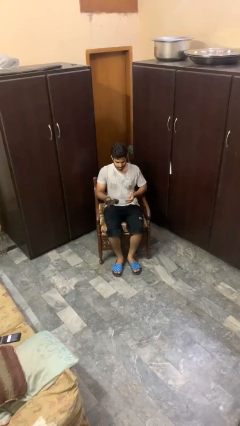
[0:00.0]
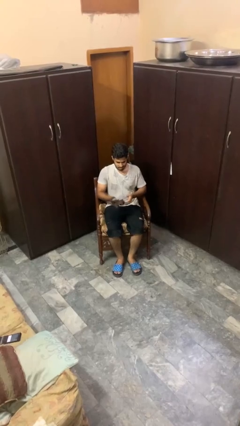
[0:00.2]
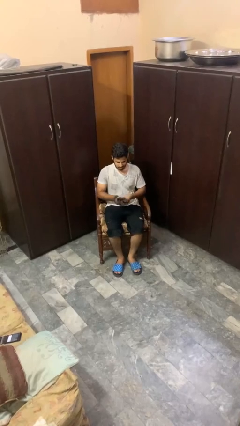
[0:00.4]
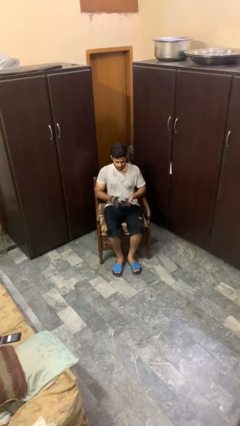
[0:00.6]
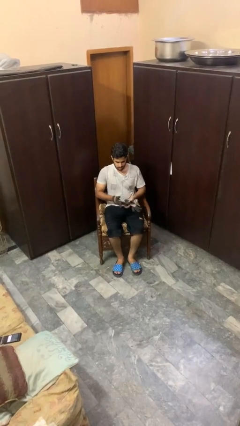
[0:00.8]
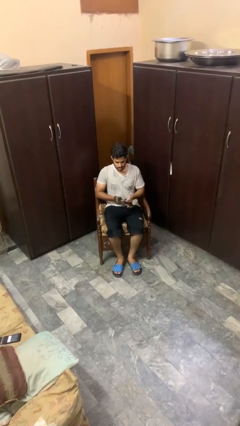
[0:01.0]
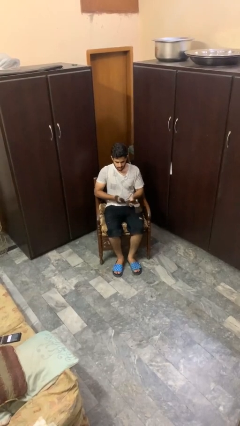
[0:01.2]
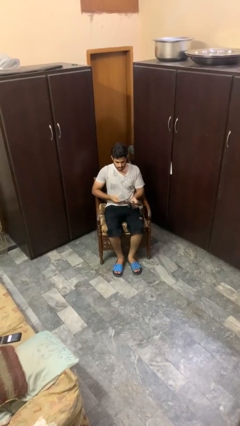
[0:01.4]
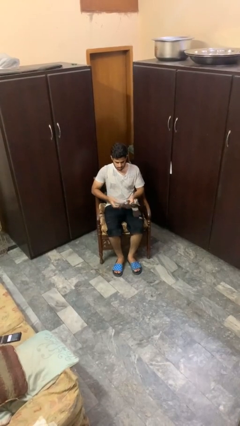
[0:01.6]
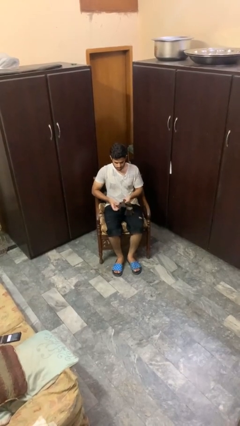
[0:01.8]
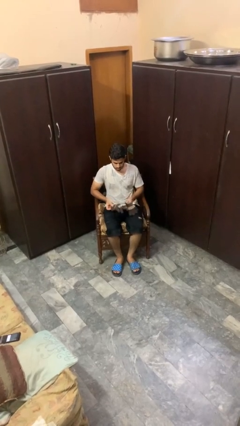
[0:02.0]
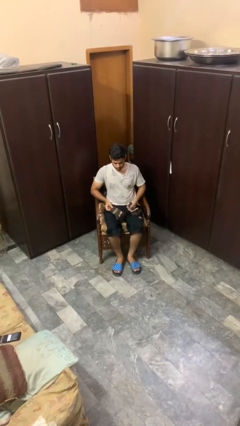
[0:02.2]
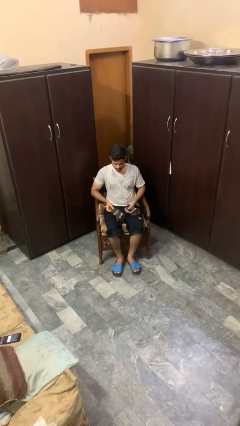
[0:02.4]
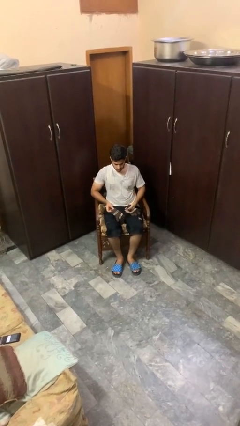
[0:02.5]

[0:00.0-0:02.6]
person takes off gloves

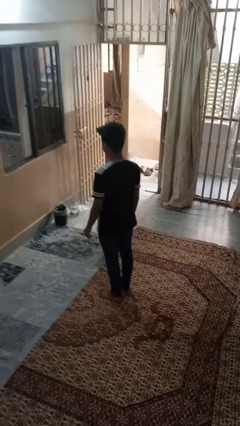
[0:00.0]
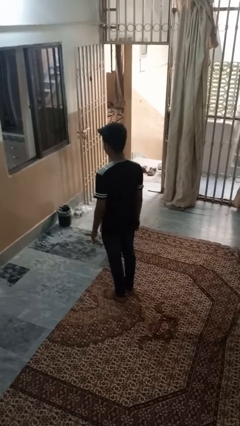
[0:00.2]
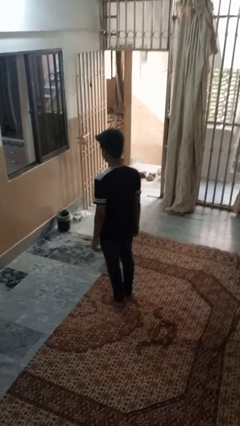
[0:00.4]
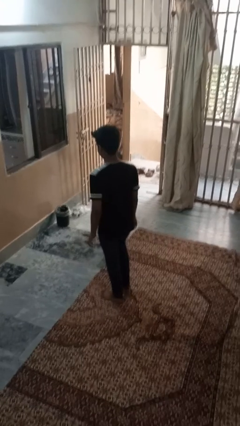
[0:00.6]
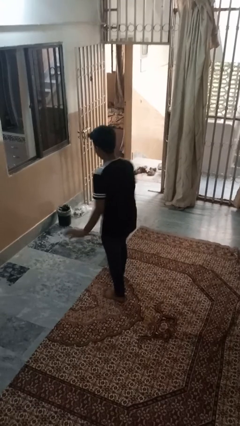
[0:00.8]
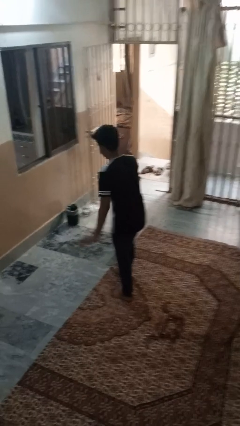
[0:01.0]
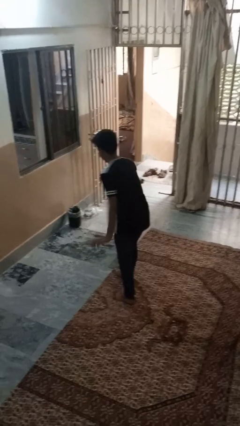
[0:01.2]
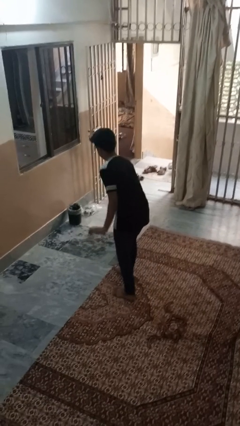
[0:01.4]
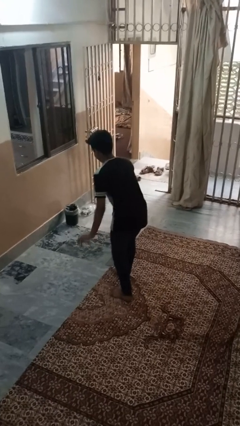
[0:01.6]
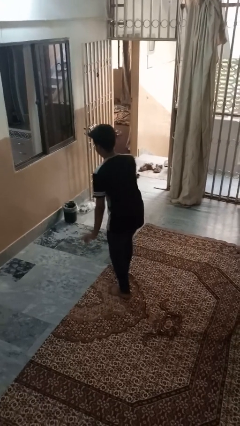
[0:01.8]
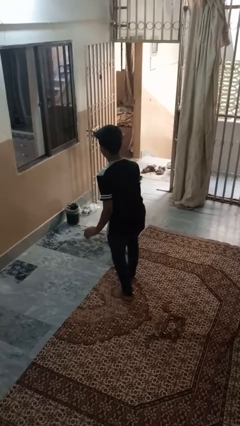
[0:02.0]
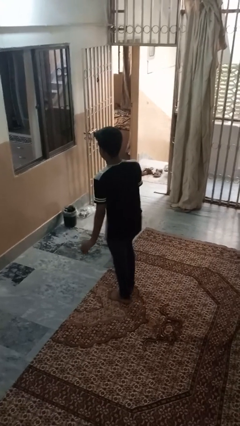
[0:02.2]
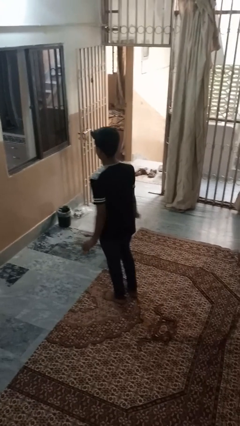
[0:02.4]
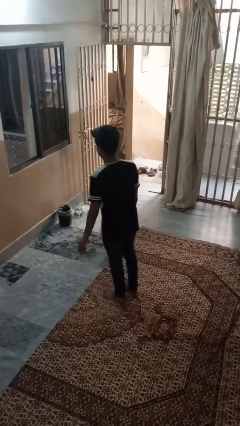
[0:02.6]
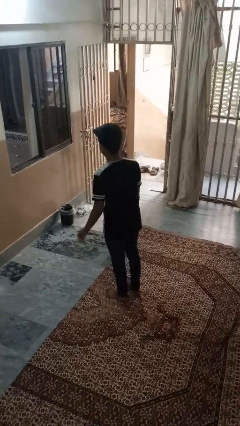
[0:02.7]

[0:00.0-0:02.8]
person dances in place

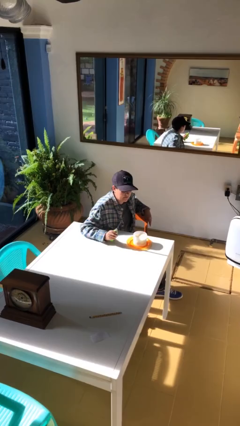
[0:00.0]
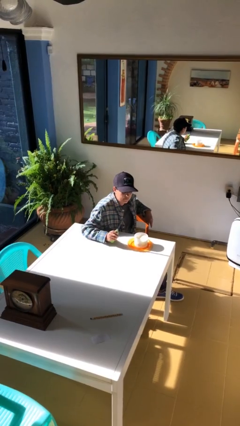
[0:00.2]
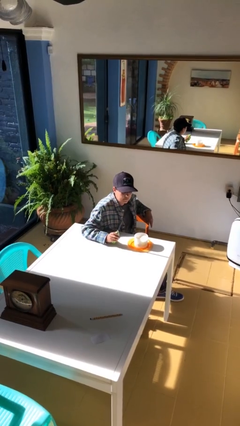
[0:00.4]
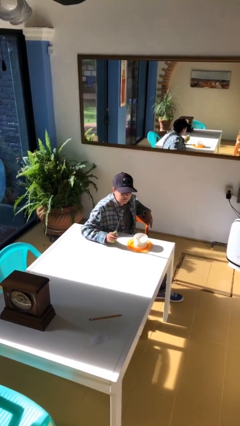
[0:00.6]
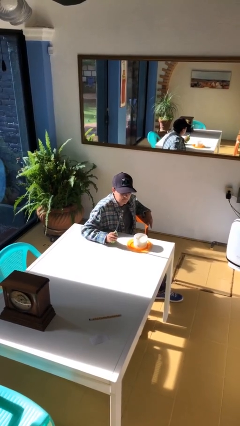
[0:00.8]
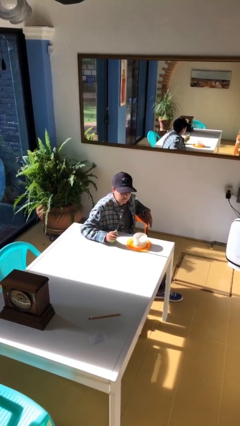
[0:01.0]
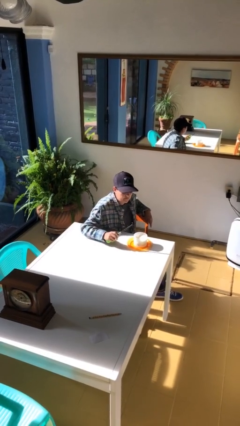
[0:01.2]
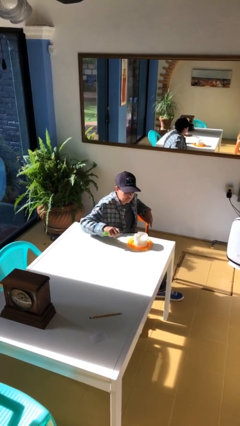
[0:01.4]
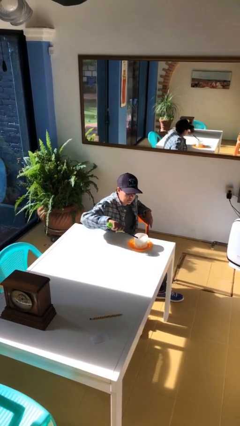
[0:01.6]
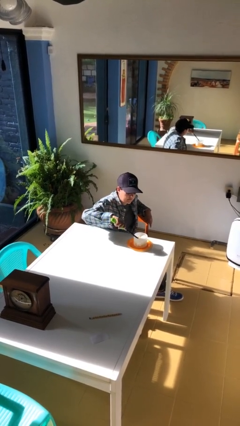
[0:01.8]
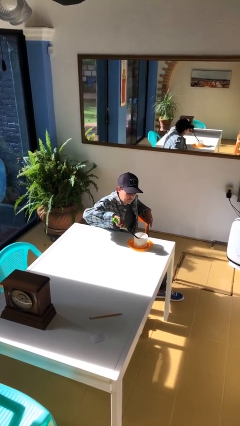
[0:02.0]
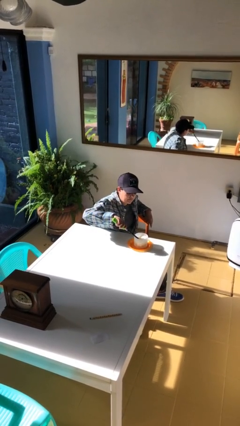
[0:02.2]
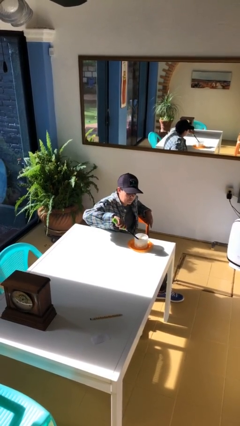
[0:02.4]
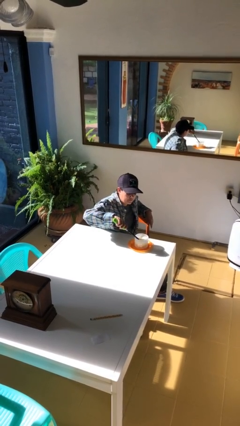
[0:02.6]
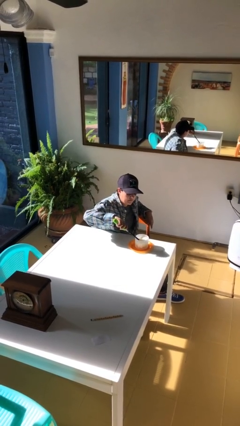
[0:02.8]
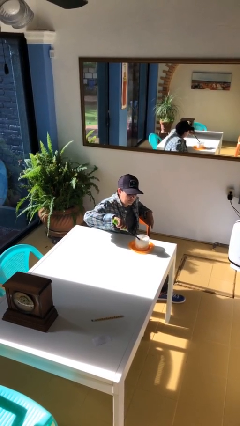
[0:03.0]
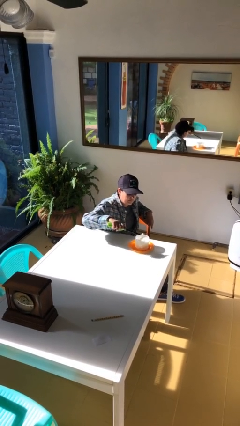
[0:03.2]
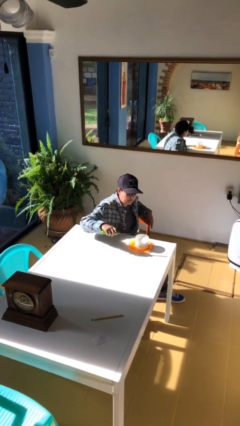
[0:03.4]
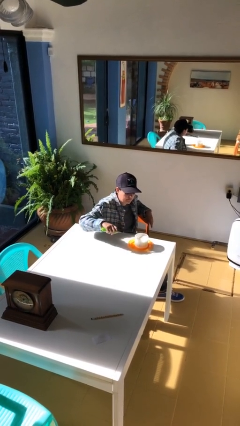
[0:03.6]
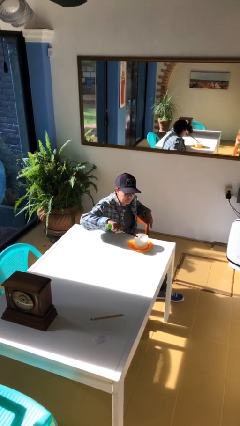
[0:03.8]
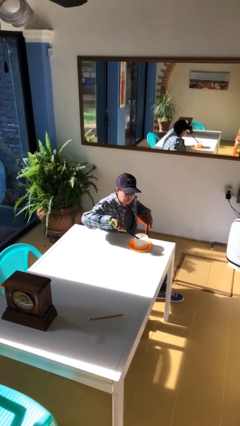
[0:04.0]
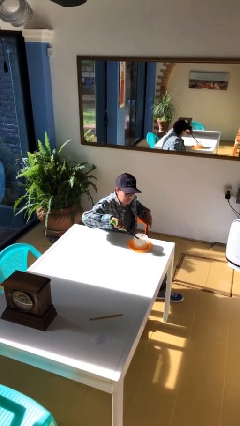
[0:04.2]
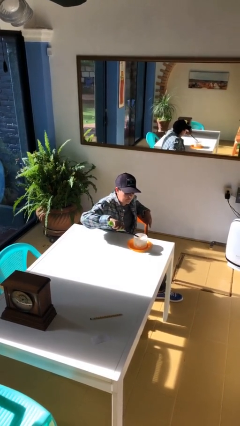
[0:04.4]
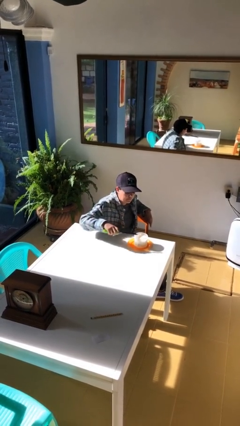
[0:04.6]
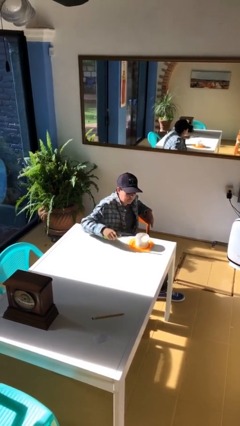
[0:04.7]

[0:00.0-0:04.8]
person lights candle

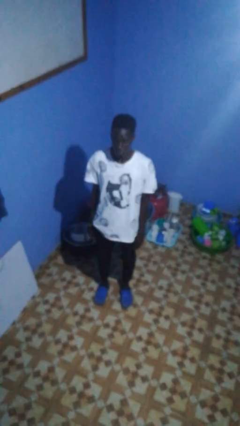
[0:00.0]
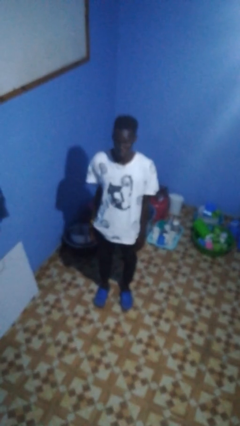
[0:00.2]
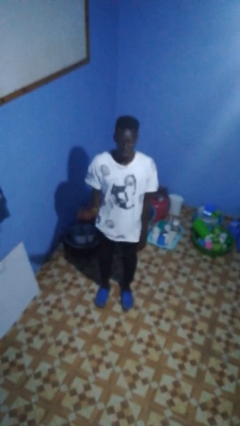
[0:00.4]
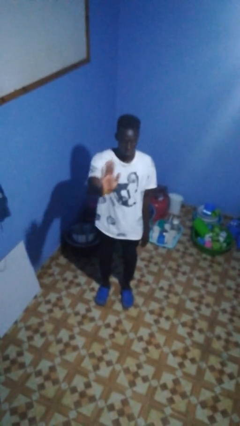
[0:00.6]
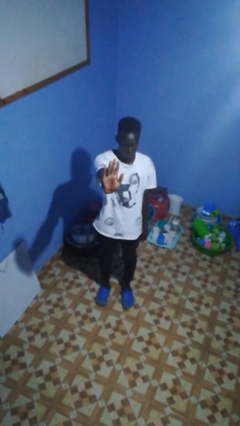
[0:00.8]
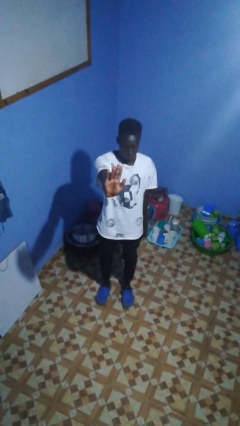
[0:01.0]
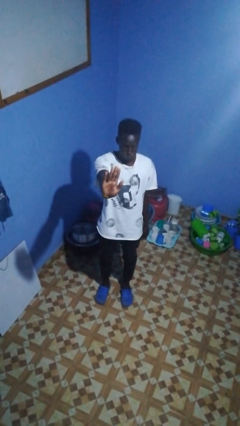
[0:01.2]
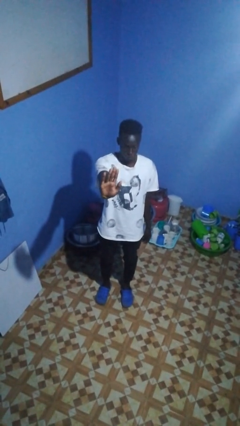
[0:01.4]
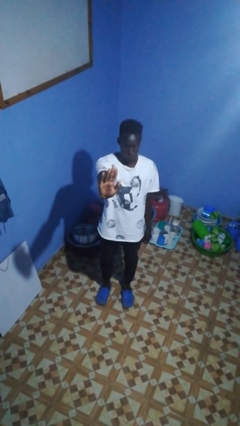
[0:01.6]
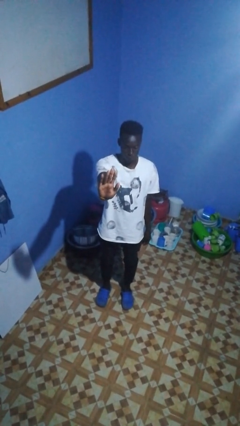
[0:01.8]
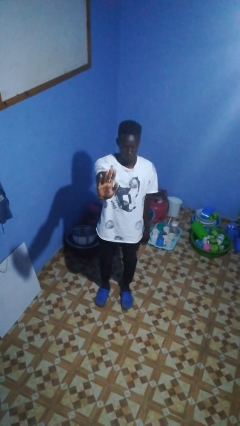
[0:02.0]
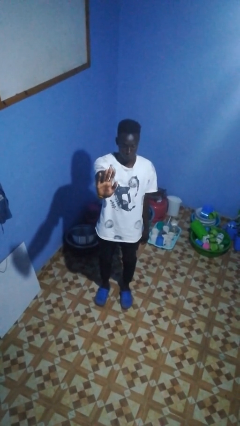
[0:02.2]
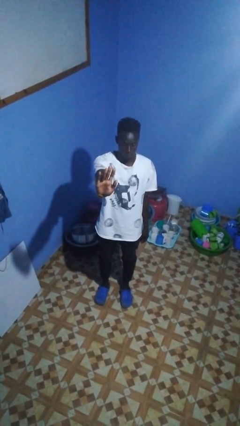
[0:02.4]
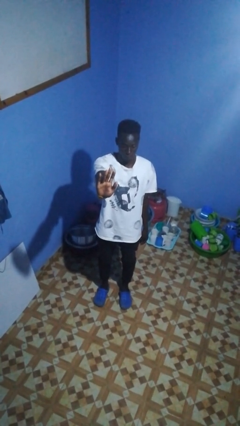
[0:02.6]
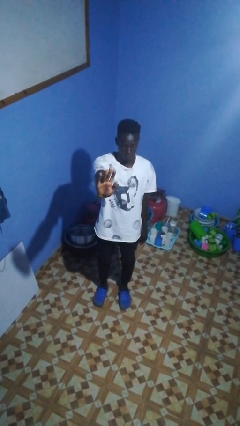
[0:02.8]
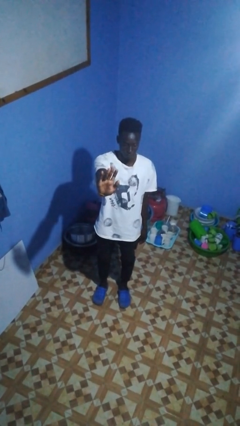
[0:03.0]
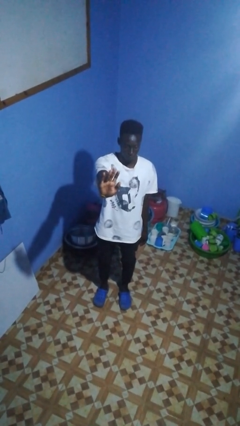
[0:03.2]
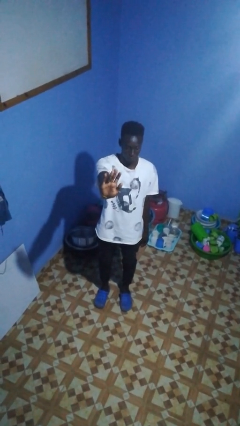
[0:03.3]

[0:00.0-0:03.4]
person gestures stop

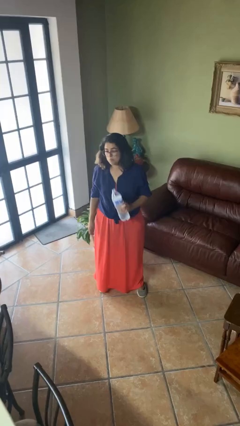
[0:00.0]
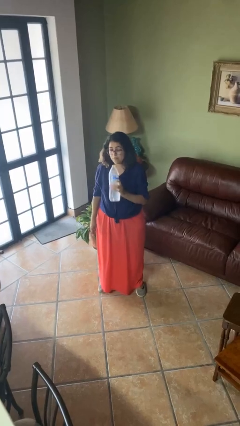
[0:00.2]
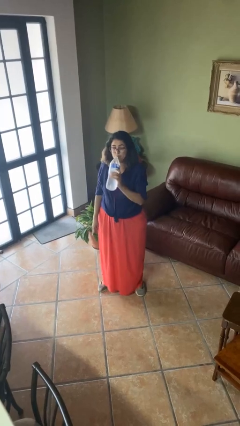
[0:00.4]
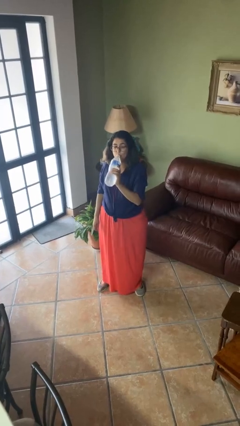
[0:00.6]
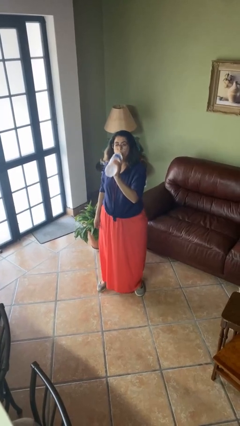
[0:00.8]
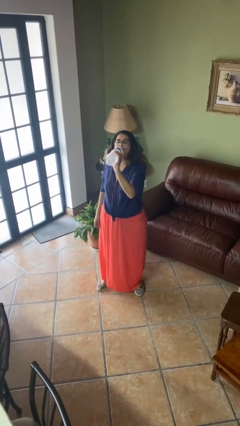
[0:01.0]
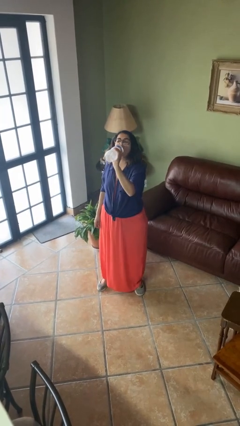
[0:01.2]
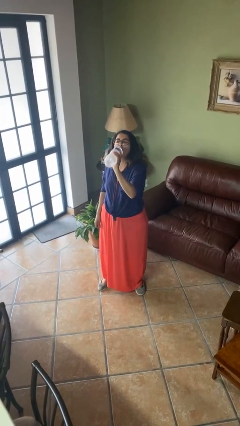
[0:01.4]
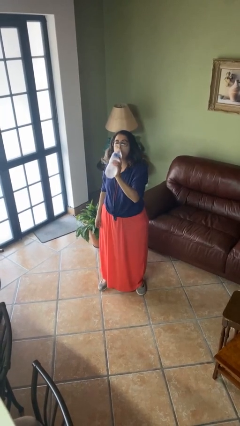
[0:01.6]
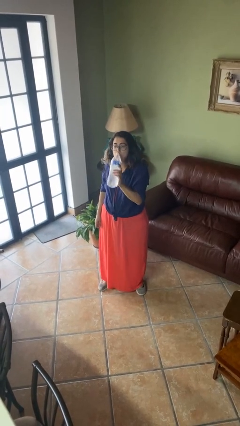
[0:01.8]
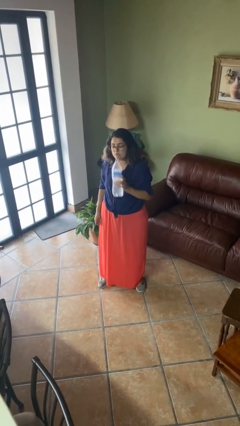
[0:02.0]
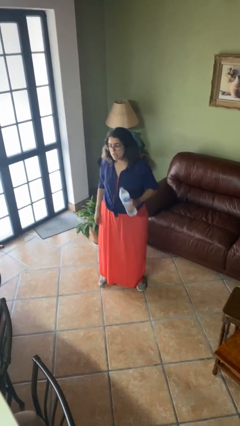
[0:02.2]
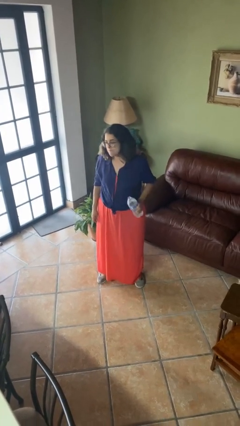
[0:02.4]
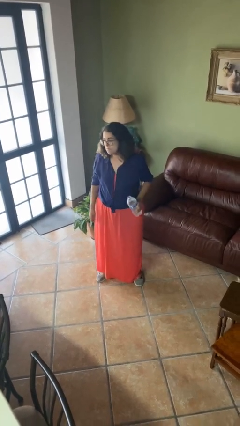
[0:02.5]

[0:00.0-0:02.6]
person drinks from bottle

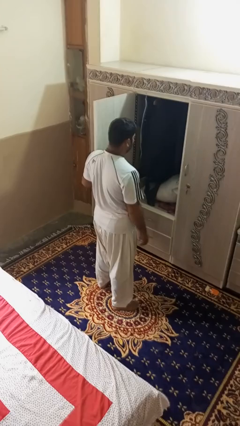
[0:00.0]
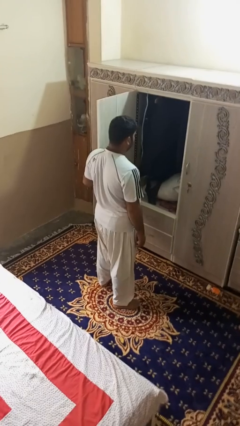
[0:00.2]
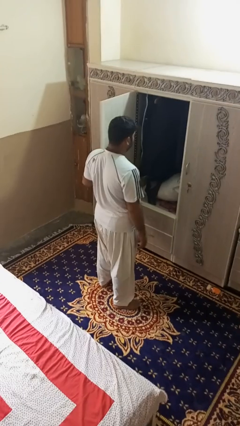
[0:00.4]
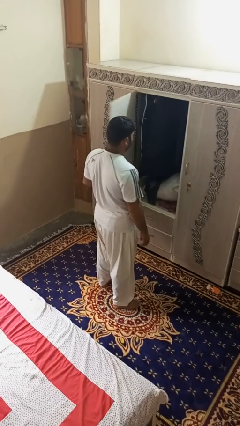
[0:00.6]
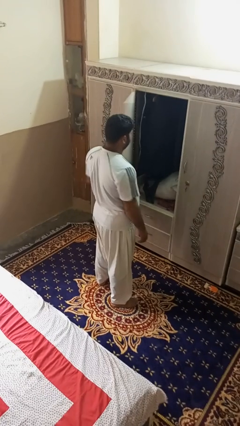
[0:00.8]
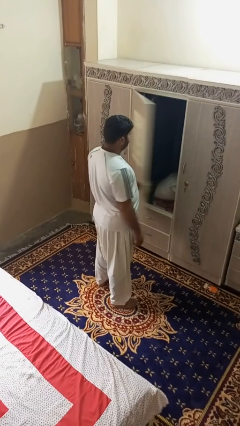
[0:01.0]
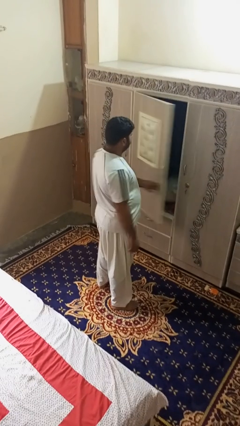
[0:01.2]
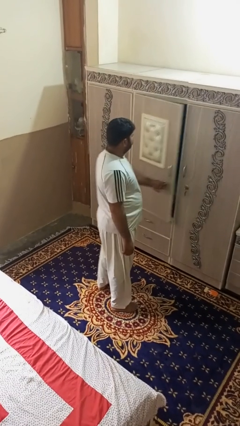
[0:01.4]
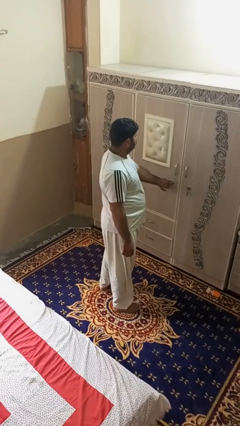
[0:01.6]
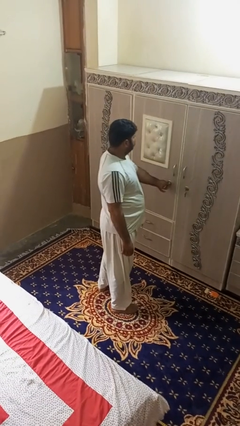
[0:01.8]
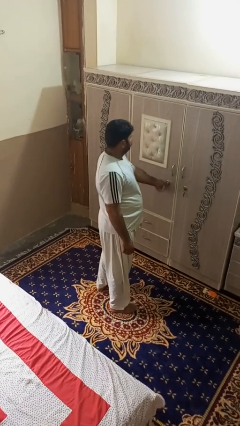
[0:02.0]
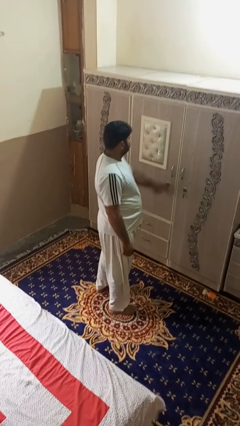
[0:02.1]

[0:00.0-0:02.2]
person closes dresser drawer
